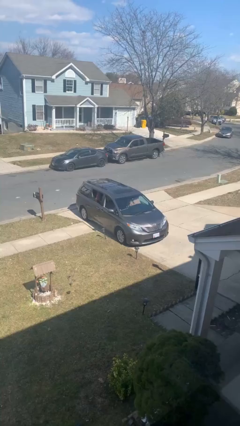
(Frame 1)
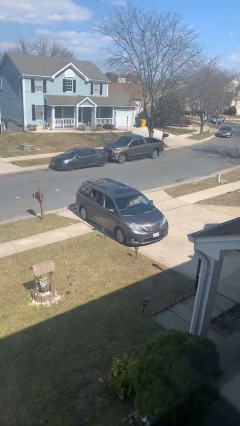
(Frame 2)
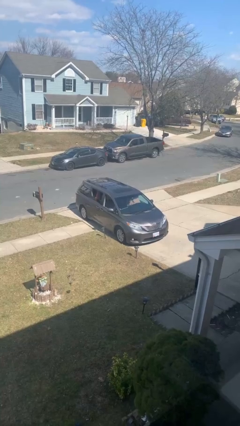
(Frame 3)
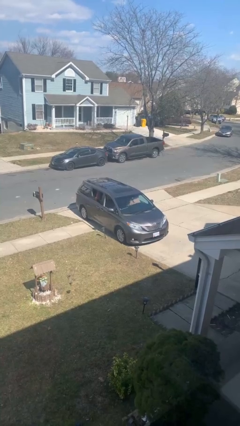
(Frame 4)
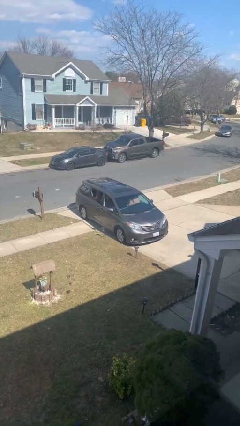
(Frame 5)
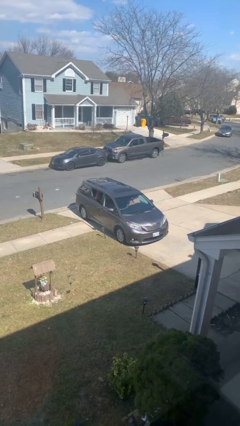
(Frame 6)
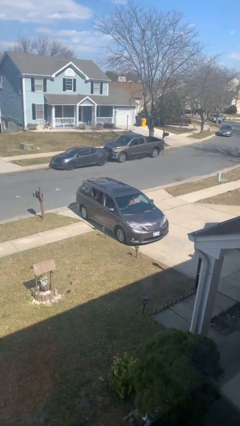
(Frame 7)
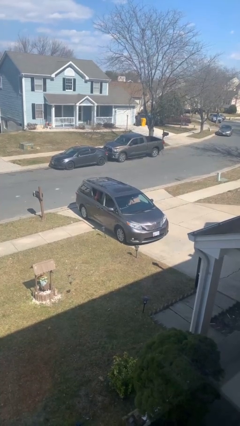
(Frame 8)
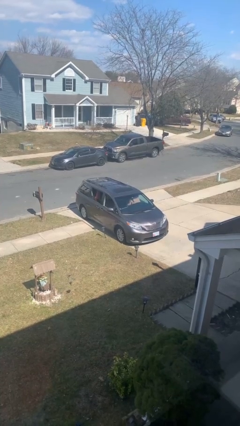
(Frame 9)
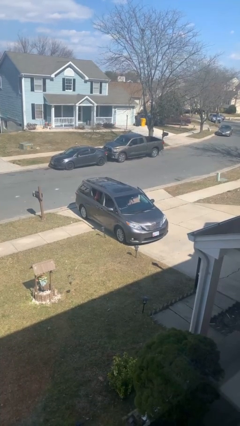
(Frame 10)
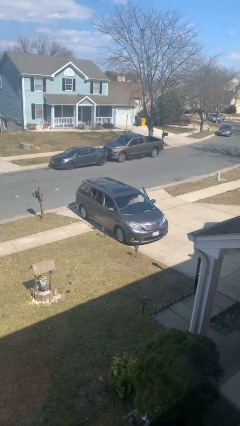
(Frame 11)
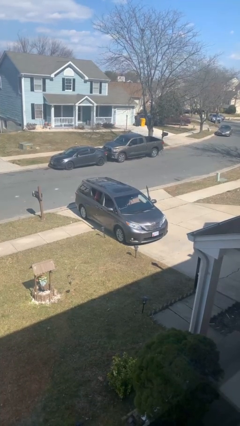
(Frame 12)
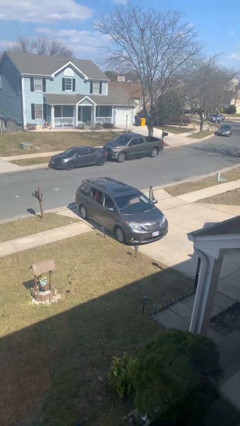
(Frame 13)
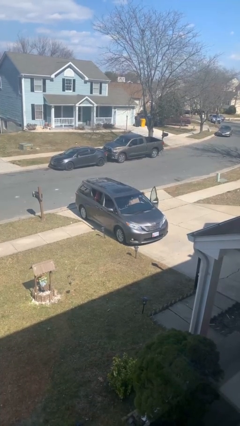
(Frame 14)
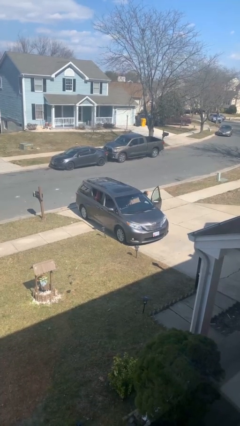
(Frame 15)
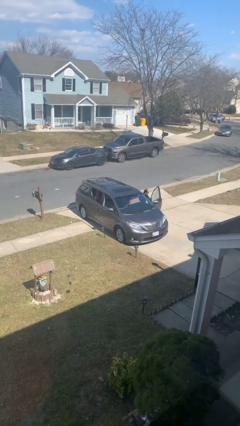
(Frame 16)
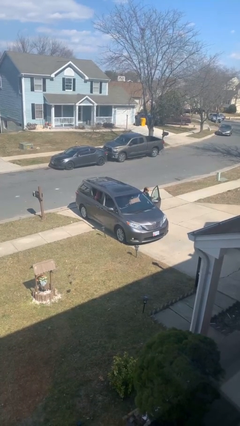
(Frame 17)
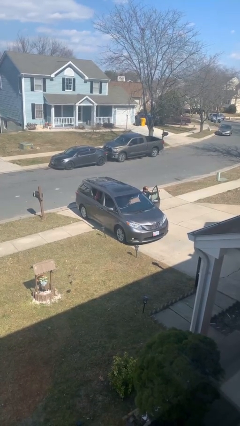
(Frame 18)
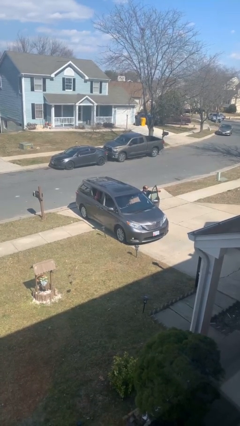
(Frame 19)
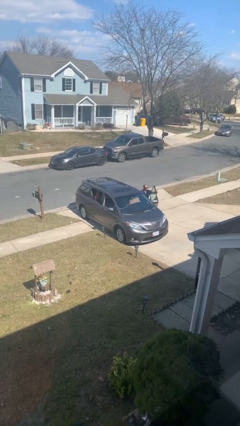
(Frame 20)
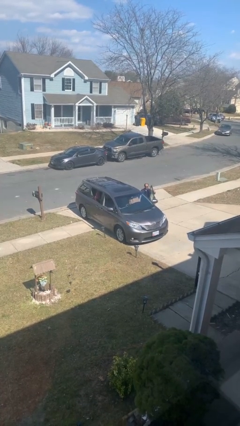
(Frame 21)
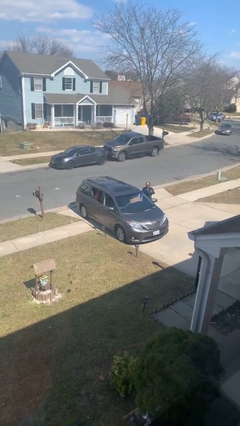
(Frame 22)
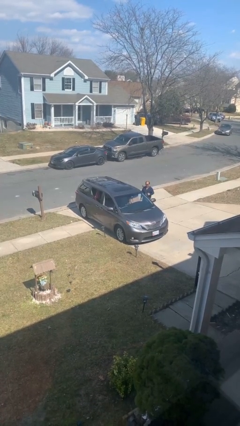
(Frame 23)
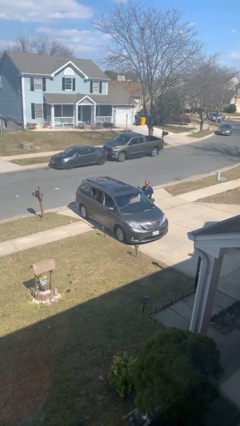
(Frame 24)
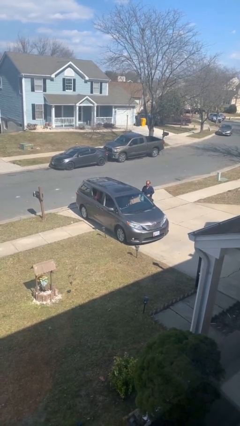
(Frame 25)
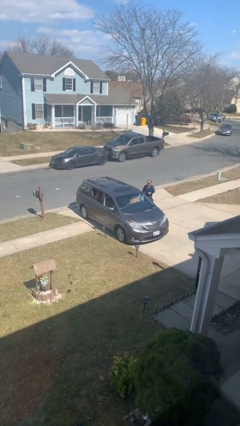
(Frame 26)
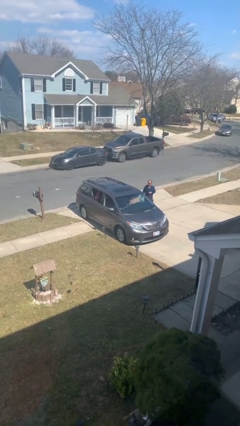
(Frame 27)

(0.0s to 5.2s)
car drops off person

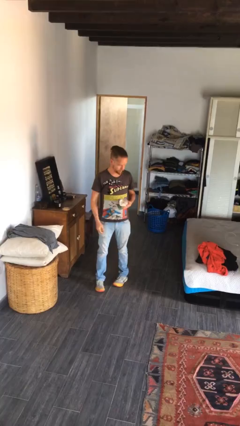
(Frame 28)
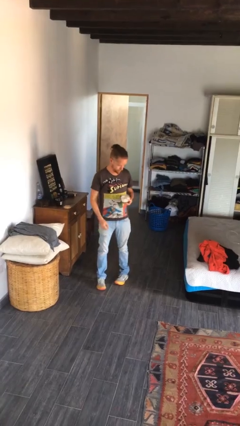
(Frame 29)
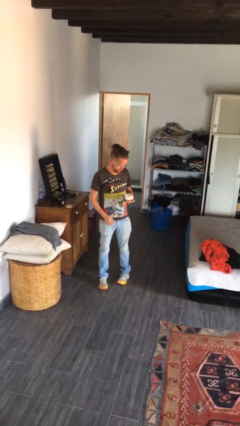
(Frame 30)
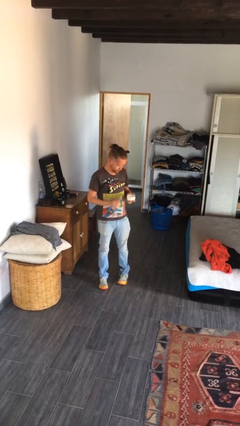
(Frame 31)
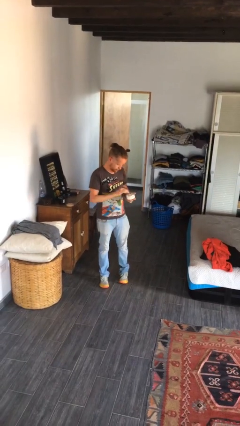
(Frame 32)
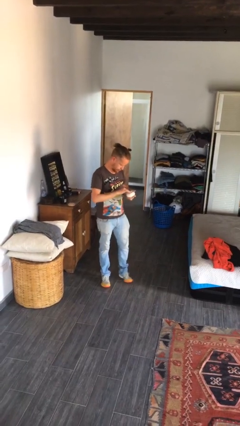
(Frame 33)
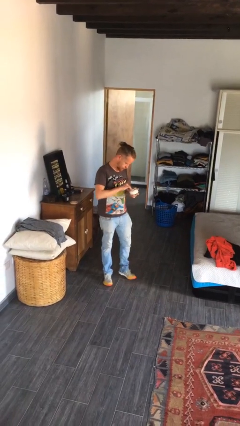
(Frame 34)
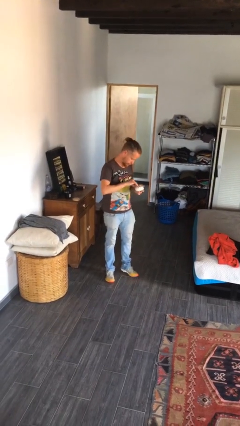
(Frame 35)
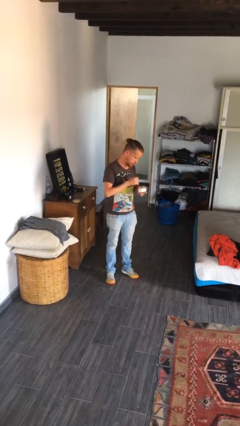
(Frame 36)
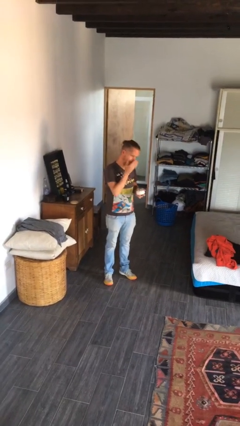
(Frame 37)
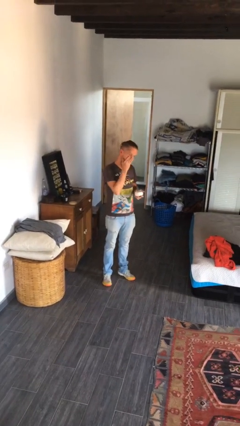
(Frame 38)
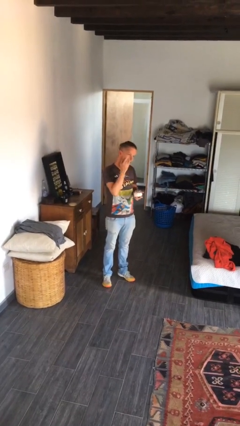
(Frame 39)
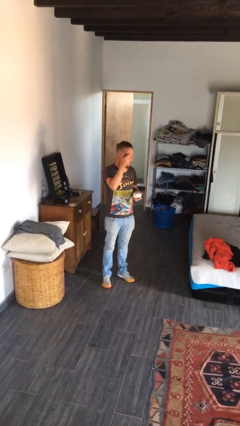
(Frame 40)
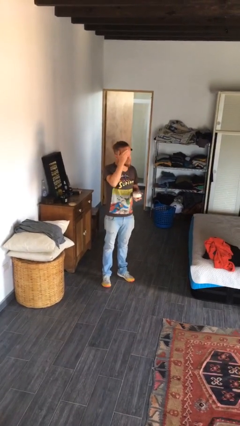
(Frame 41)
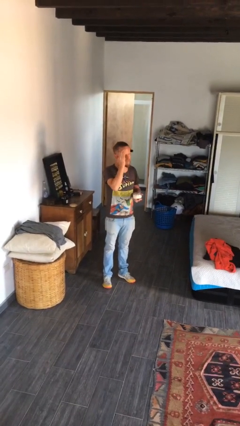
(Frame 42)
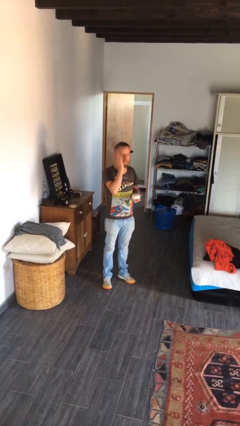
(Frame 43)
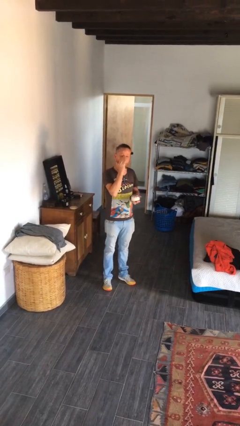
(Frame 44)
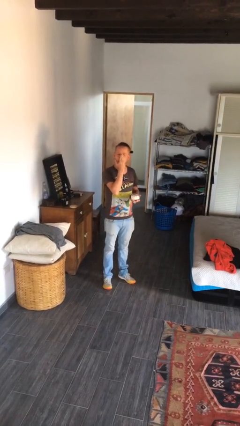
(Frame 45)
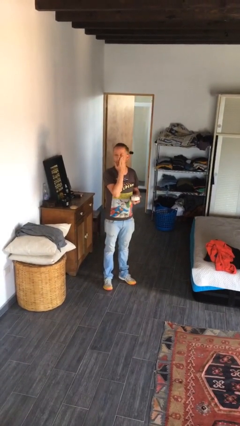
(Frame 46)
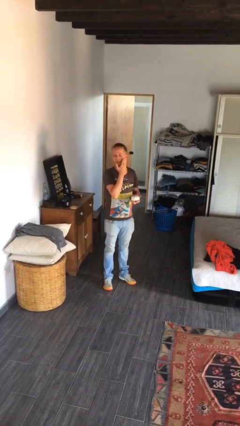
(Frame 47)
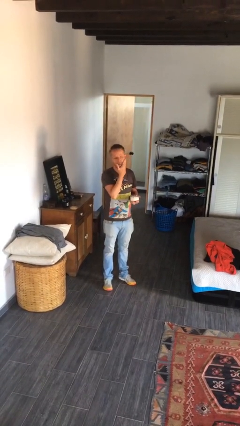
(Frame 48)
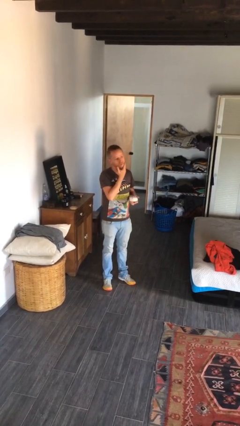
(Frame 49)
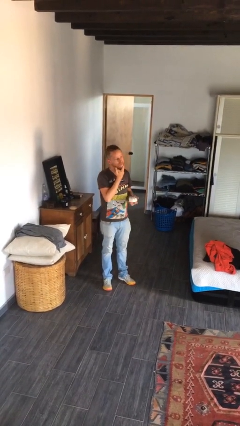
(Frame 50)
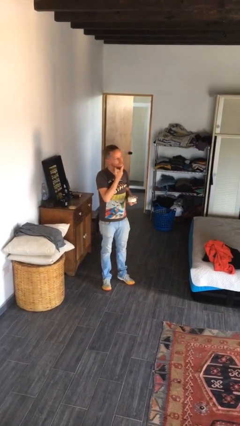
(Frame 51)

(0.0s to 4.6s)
person applies facial moisturizer

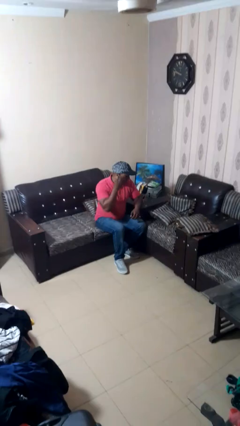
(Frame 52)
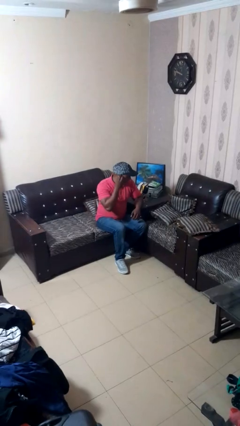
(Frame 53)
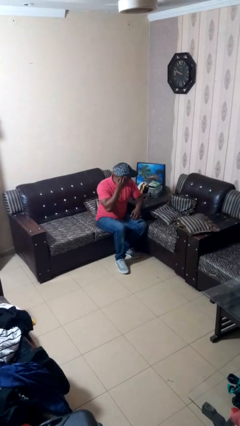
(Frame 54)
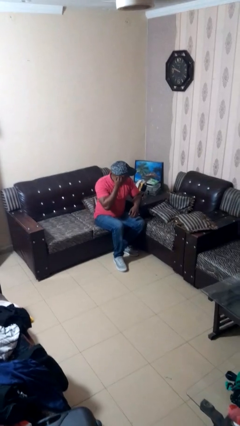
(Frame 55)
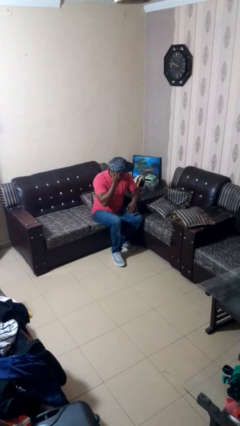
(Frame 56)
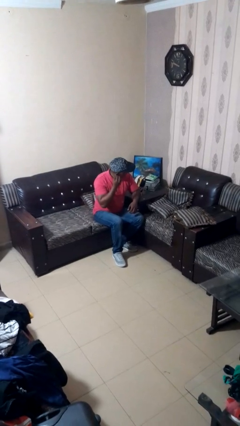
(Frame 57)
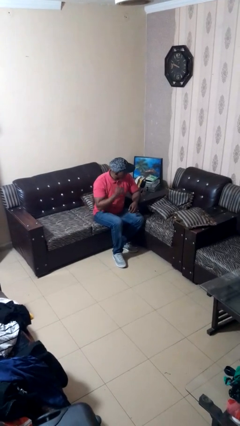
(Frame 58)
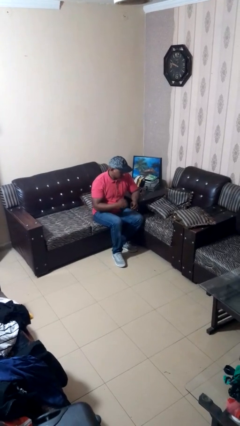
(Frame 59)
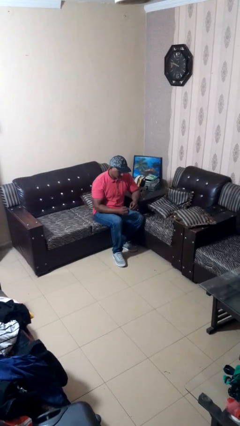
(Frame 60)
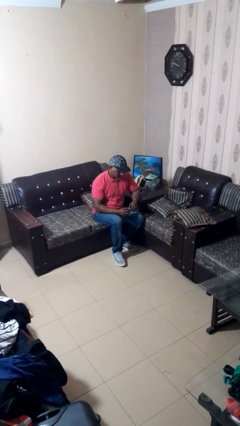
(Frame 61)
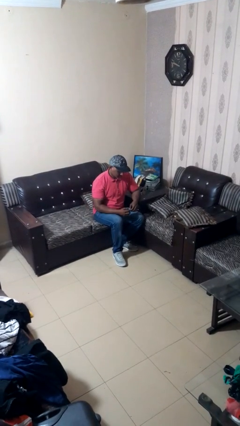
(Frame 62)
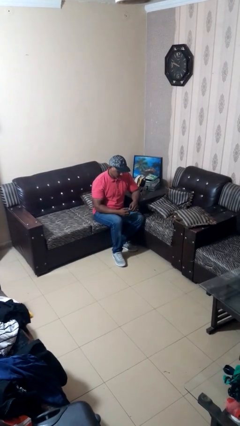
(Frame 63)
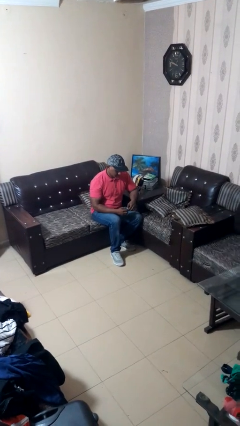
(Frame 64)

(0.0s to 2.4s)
person takes off earrings

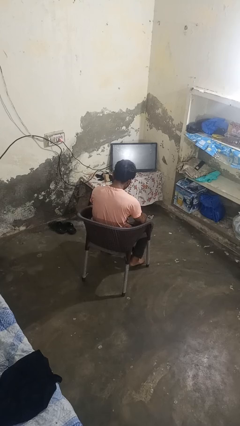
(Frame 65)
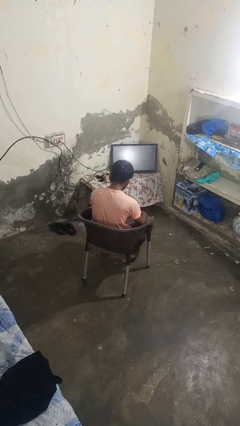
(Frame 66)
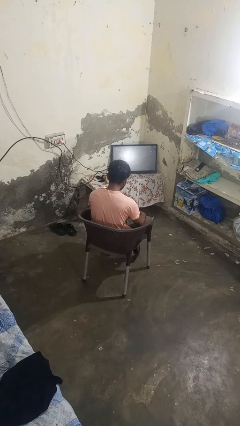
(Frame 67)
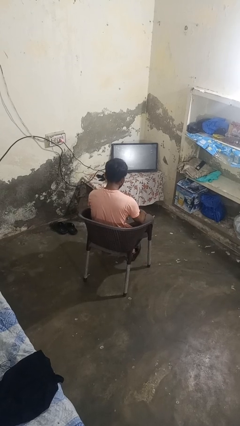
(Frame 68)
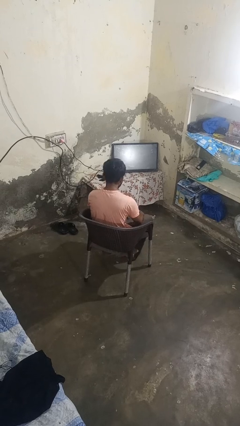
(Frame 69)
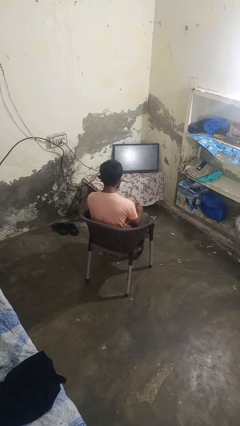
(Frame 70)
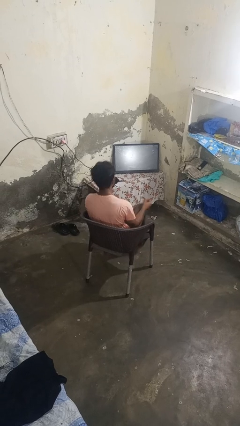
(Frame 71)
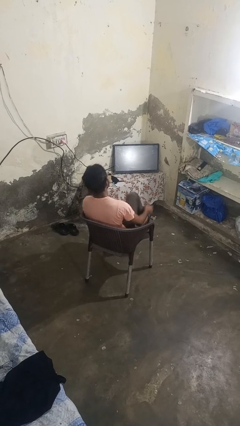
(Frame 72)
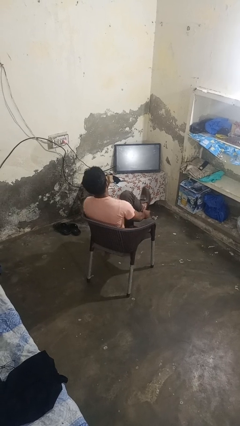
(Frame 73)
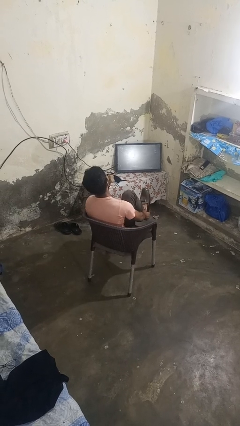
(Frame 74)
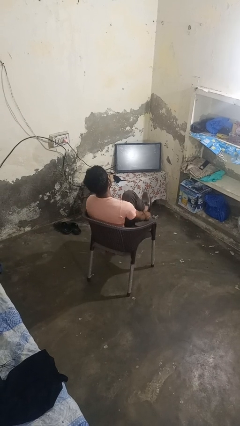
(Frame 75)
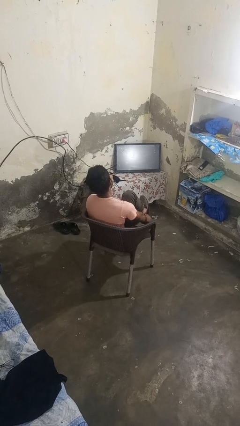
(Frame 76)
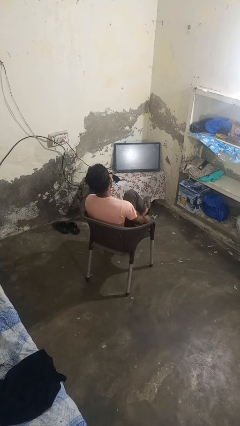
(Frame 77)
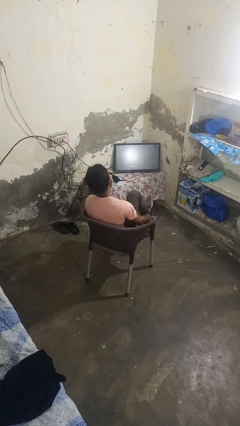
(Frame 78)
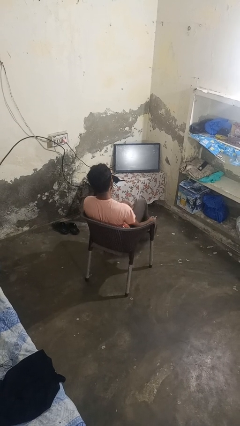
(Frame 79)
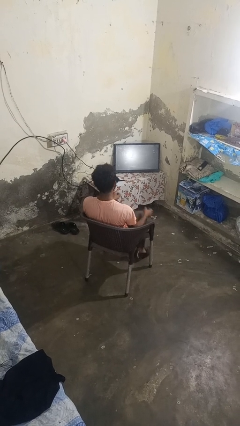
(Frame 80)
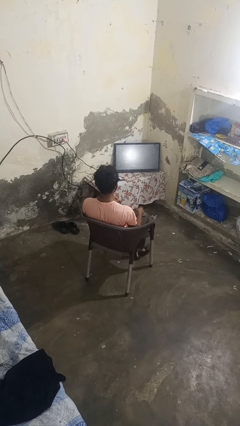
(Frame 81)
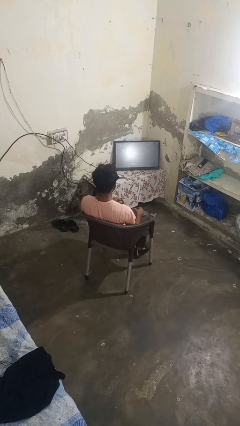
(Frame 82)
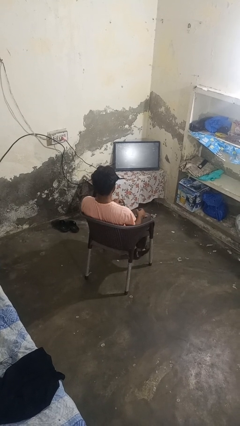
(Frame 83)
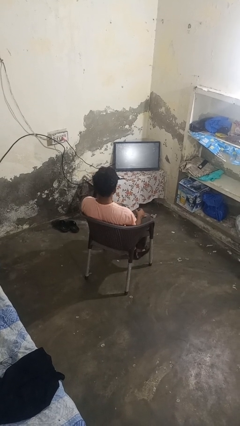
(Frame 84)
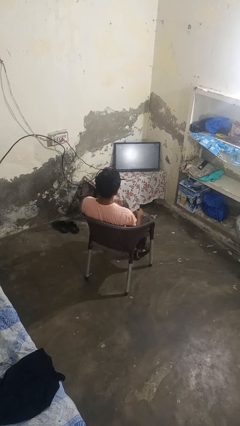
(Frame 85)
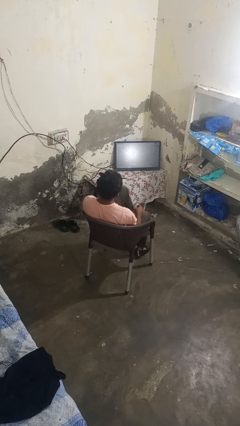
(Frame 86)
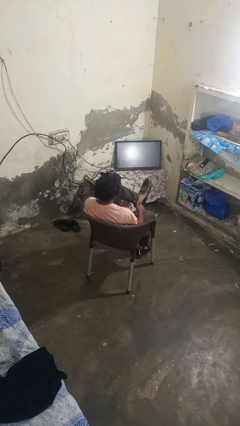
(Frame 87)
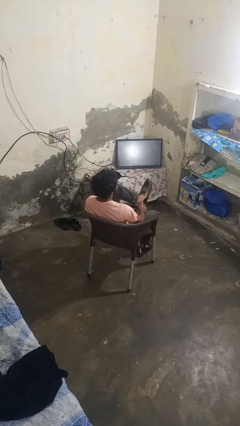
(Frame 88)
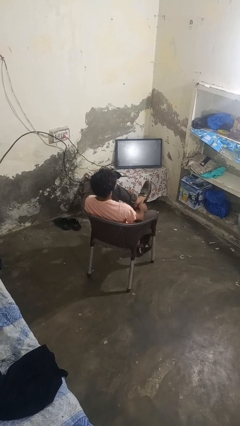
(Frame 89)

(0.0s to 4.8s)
person puts on shoes

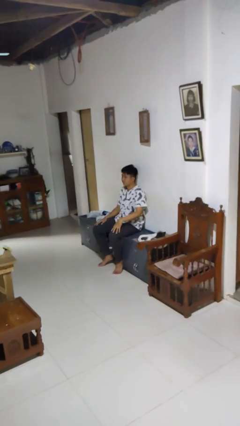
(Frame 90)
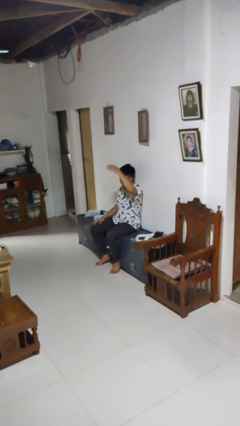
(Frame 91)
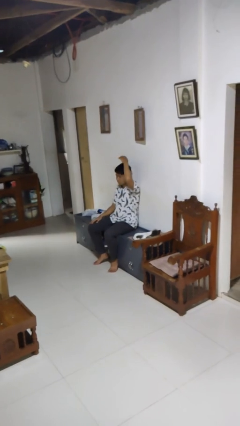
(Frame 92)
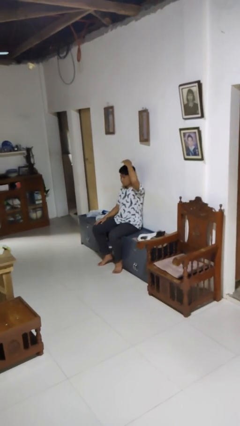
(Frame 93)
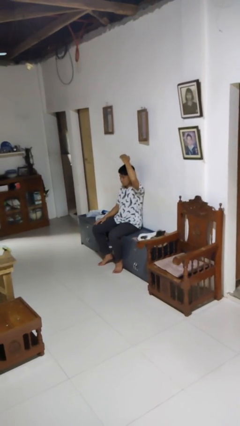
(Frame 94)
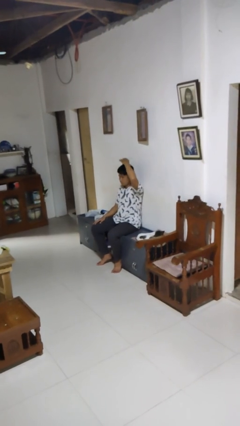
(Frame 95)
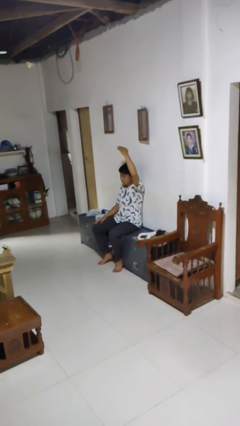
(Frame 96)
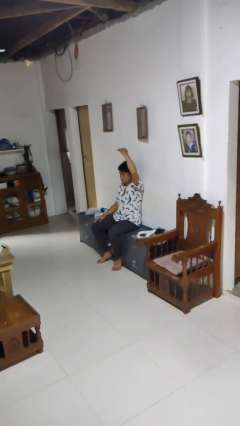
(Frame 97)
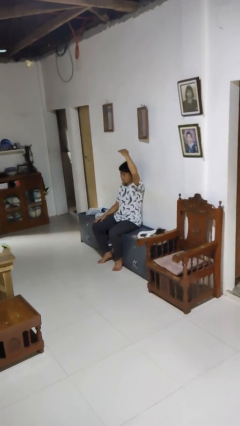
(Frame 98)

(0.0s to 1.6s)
person pats head
